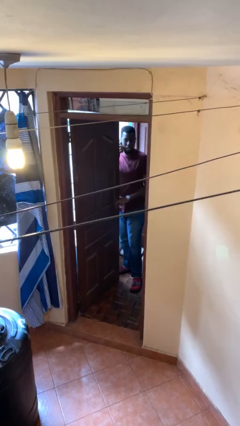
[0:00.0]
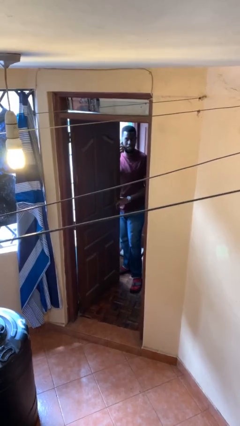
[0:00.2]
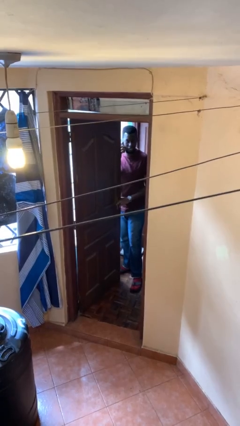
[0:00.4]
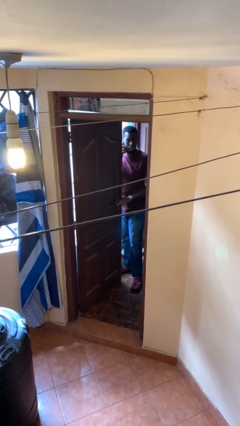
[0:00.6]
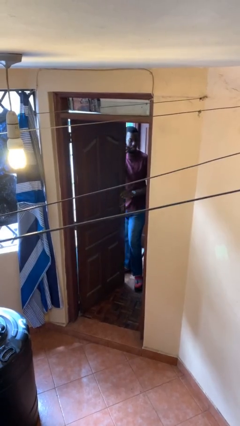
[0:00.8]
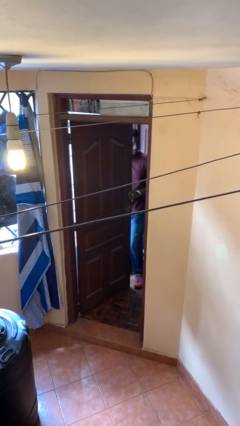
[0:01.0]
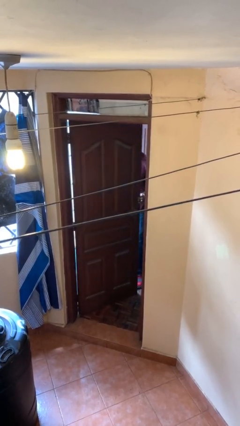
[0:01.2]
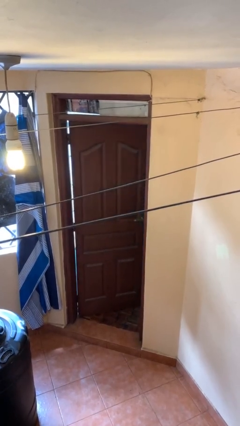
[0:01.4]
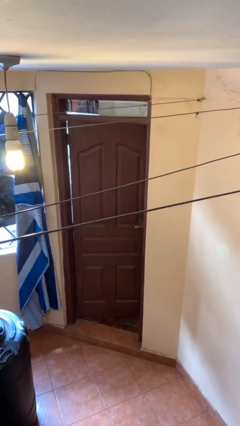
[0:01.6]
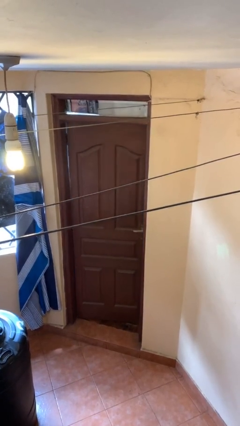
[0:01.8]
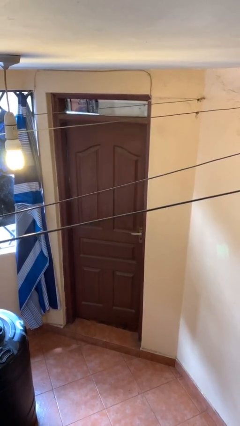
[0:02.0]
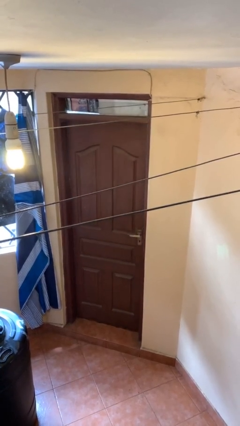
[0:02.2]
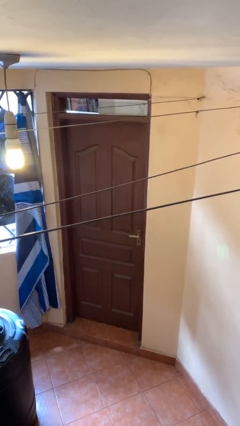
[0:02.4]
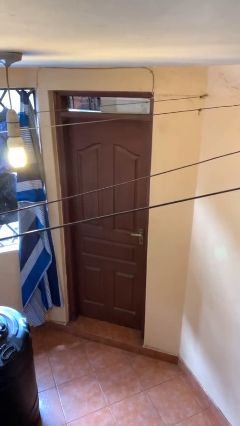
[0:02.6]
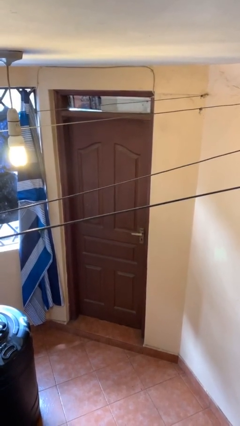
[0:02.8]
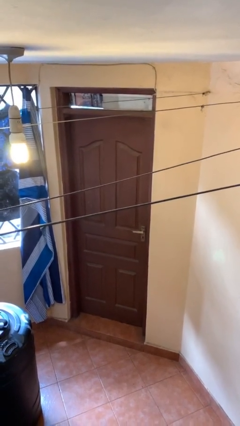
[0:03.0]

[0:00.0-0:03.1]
person closes facility door

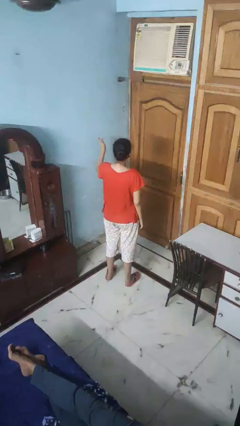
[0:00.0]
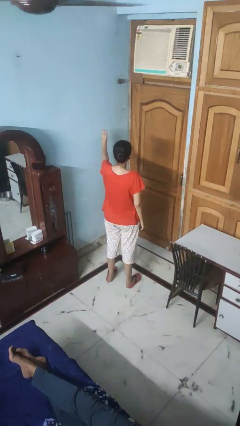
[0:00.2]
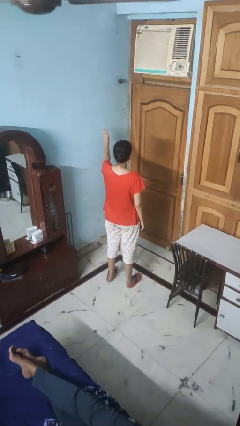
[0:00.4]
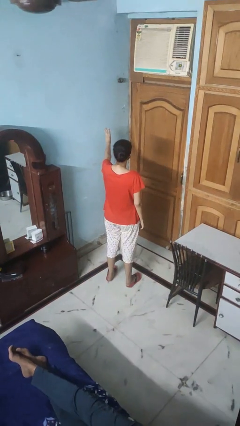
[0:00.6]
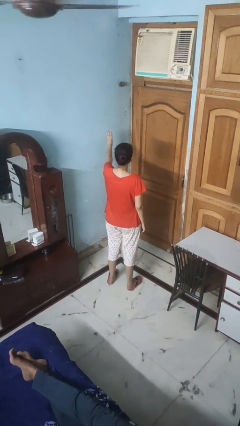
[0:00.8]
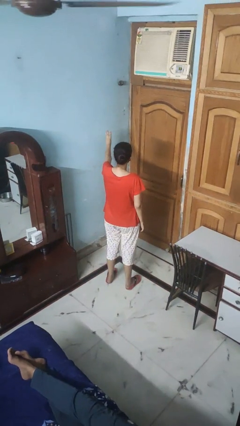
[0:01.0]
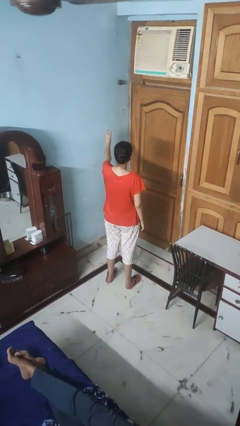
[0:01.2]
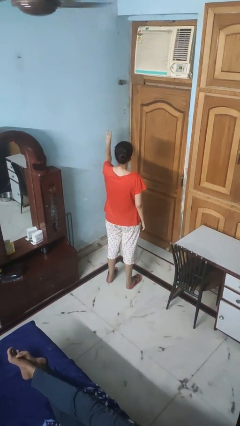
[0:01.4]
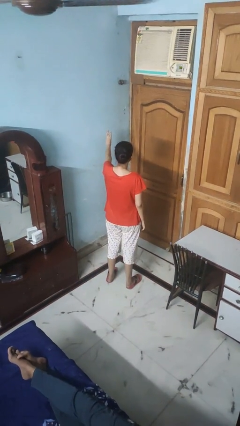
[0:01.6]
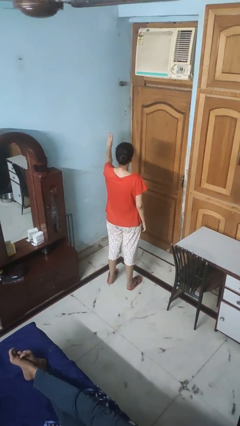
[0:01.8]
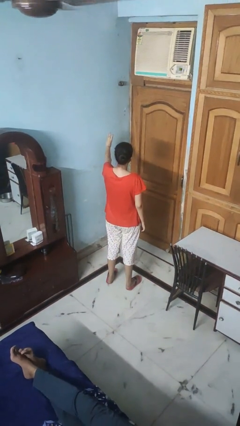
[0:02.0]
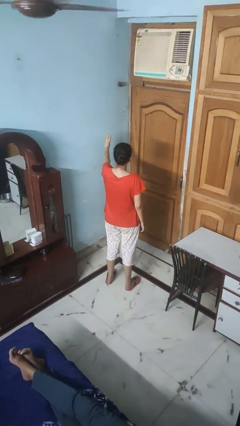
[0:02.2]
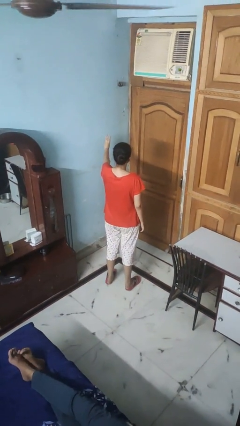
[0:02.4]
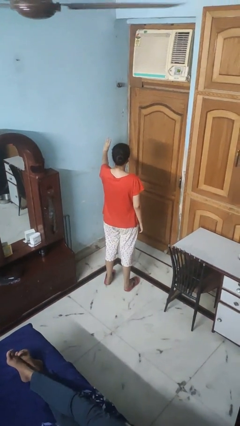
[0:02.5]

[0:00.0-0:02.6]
person gestures number three

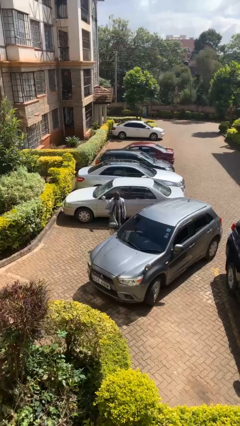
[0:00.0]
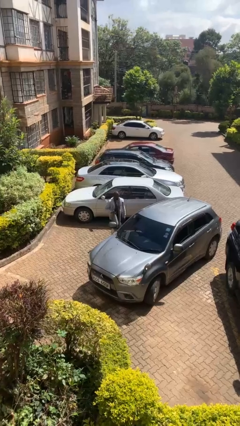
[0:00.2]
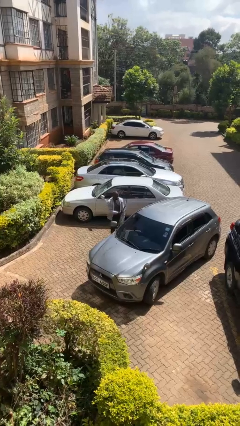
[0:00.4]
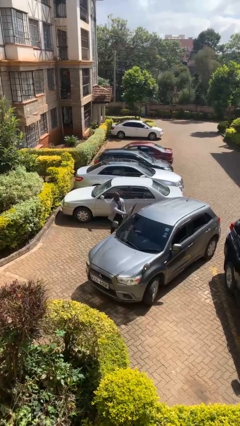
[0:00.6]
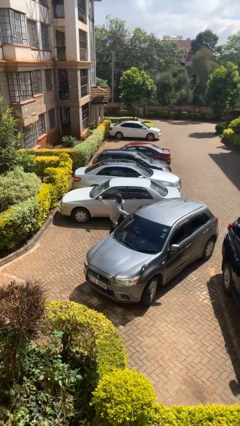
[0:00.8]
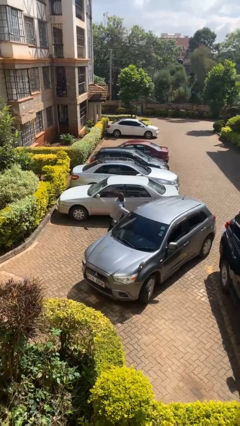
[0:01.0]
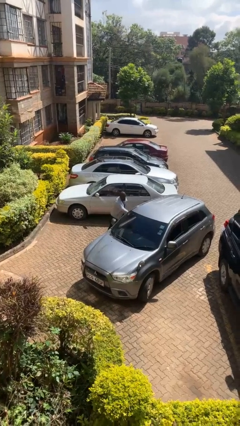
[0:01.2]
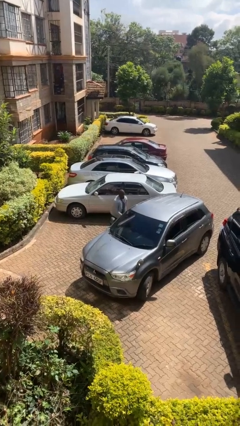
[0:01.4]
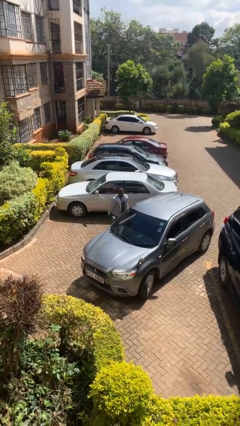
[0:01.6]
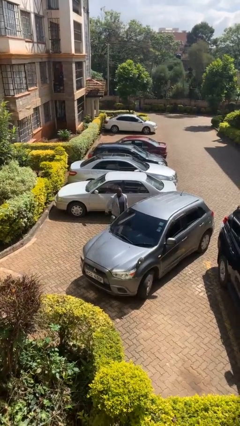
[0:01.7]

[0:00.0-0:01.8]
person closes car door

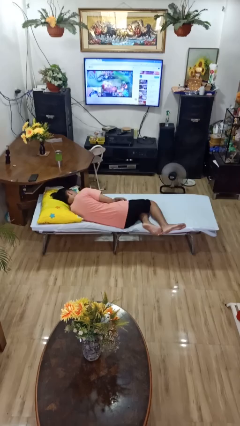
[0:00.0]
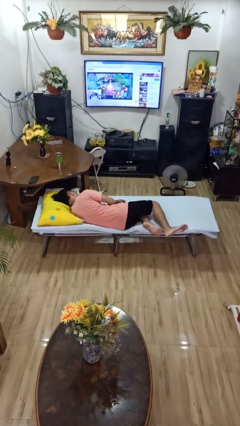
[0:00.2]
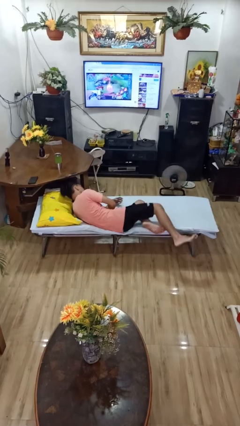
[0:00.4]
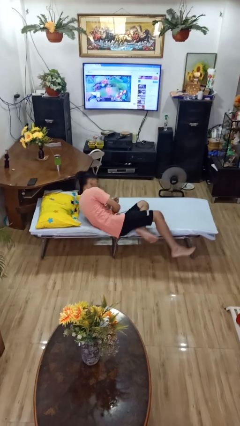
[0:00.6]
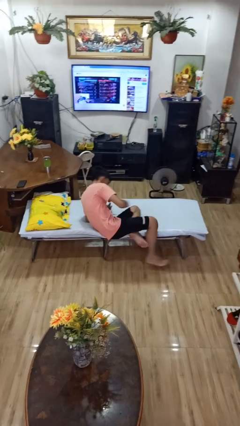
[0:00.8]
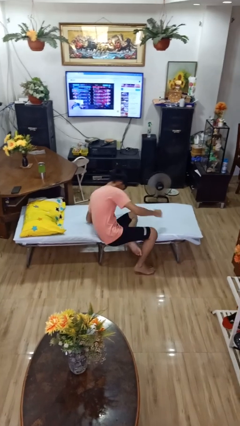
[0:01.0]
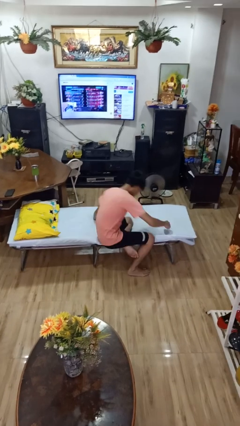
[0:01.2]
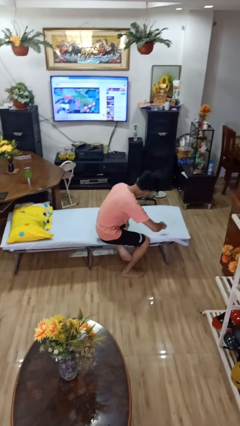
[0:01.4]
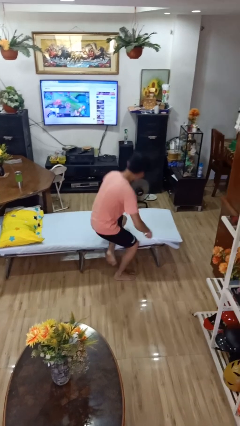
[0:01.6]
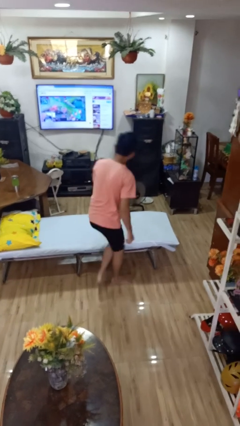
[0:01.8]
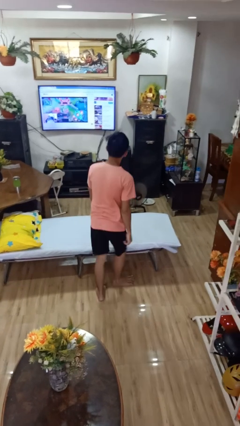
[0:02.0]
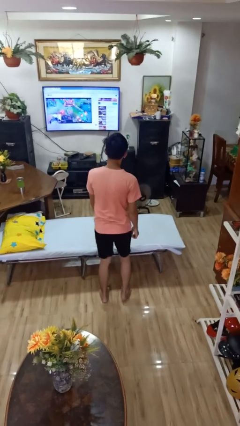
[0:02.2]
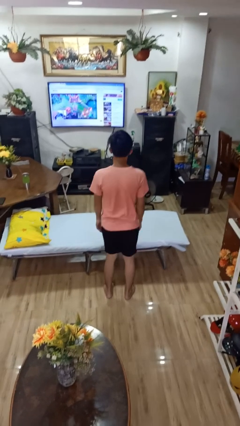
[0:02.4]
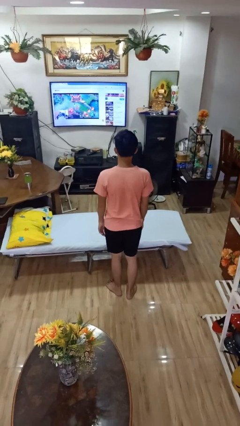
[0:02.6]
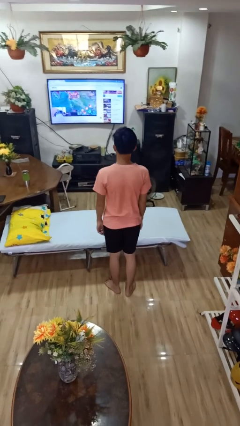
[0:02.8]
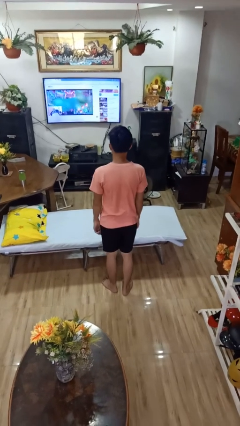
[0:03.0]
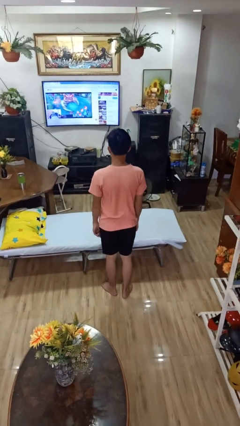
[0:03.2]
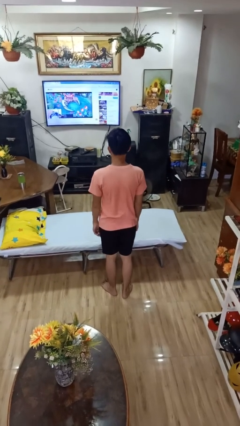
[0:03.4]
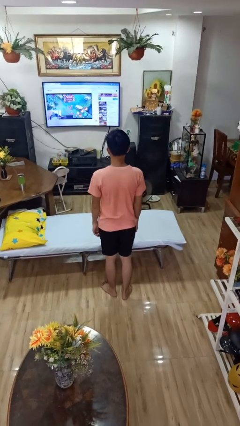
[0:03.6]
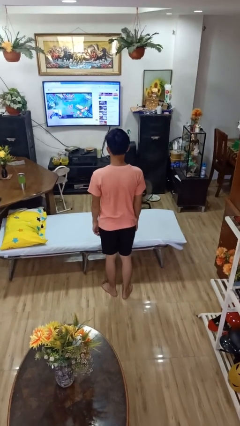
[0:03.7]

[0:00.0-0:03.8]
person stands up

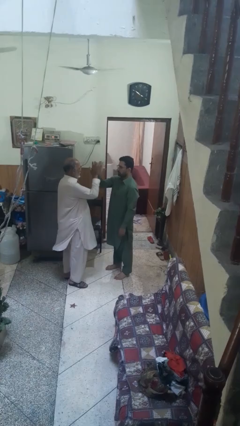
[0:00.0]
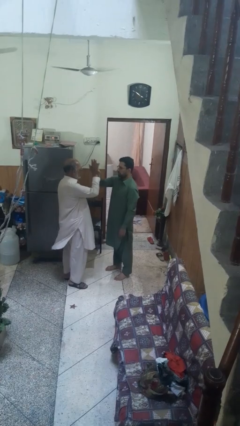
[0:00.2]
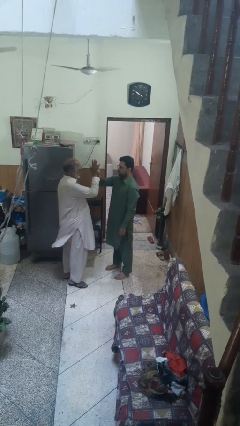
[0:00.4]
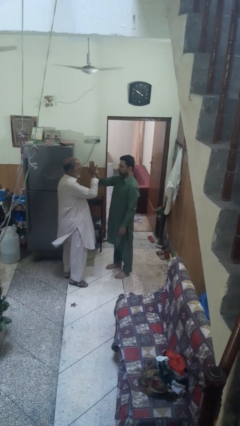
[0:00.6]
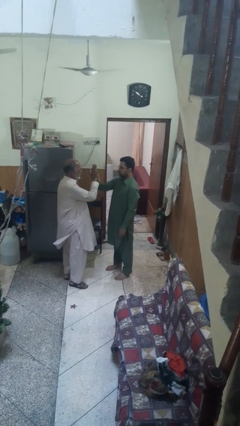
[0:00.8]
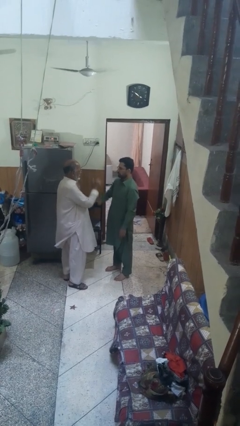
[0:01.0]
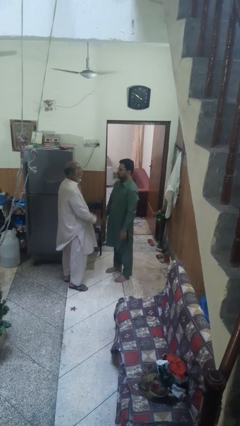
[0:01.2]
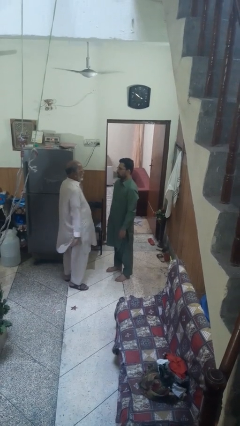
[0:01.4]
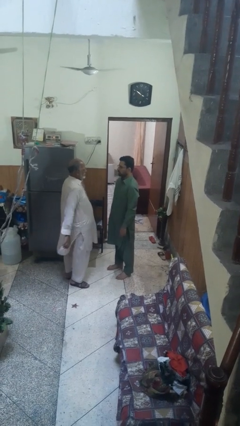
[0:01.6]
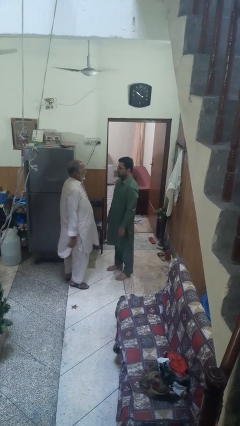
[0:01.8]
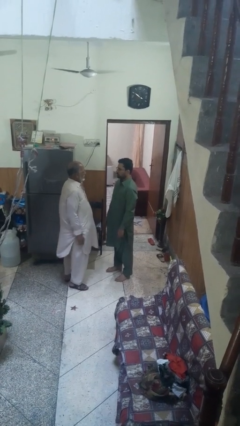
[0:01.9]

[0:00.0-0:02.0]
person highfives hand

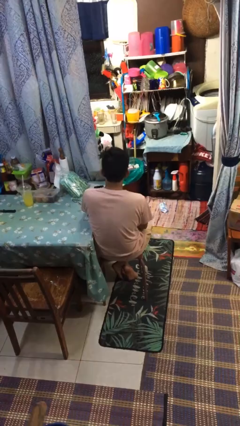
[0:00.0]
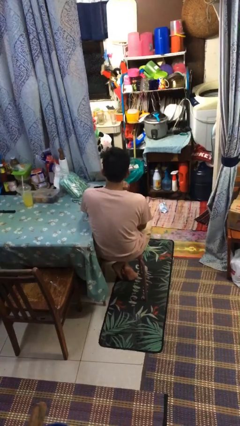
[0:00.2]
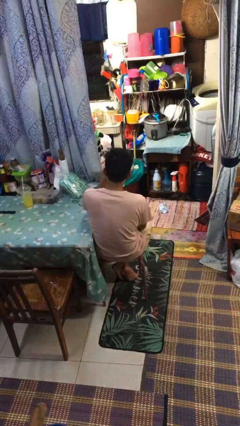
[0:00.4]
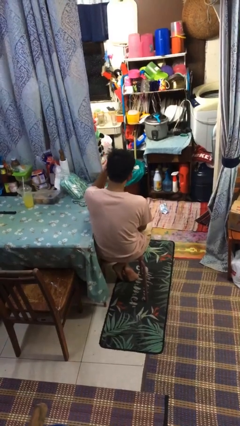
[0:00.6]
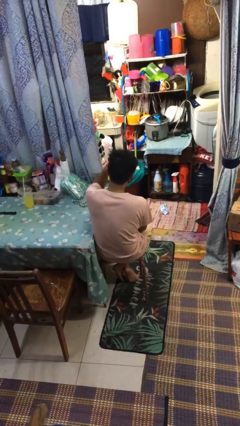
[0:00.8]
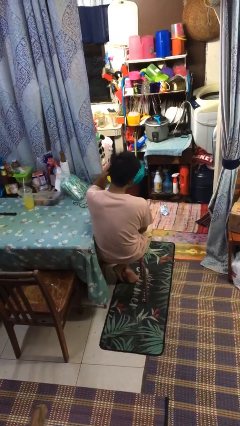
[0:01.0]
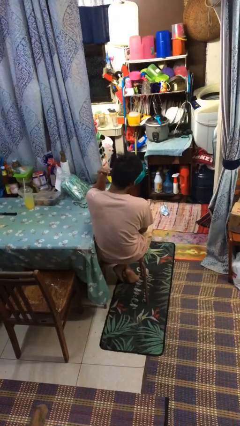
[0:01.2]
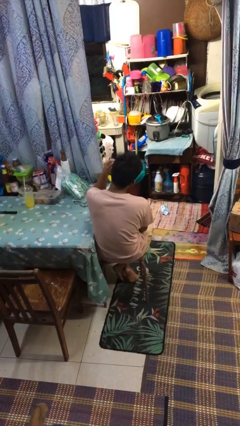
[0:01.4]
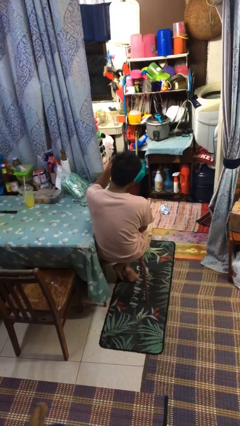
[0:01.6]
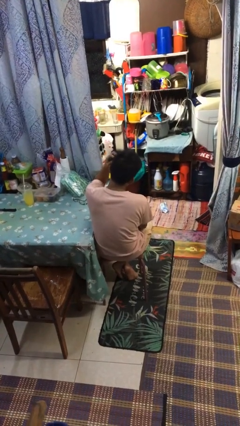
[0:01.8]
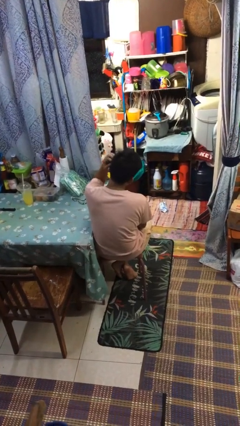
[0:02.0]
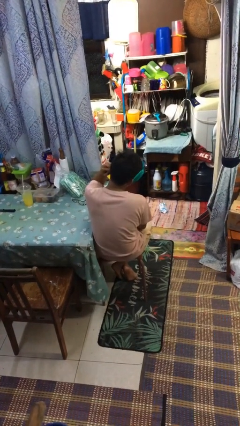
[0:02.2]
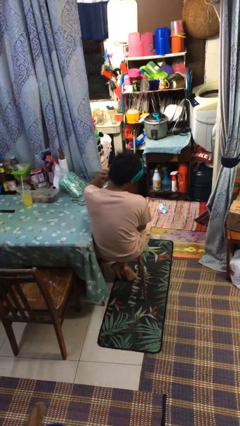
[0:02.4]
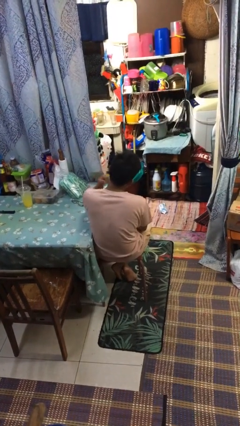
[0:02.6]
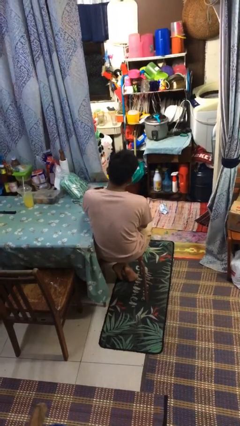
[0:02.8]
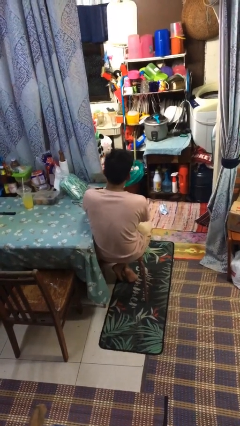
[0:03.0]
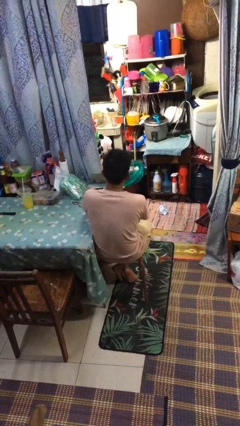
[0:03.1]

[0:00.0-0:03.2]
person strokes hair

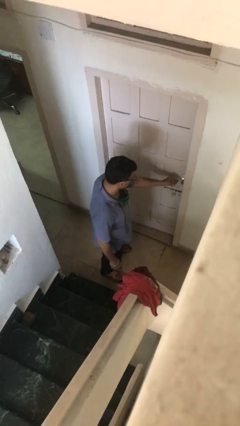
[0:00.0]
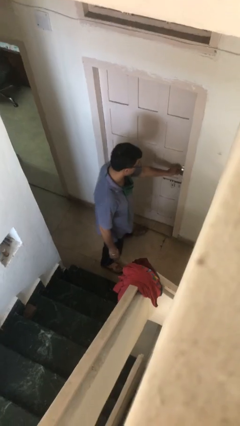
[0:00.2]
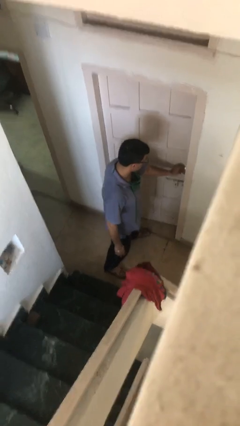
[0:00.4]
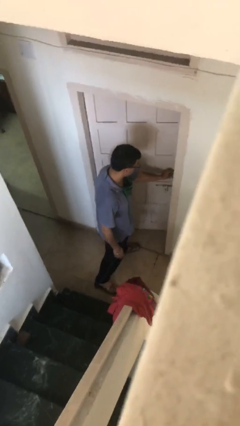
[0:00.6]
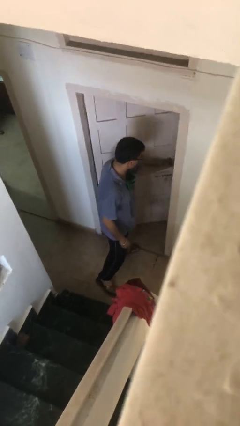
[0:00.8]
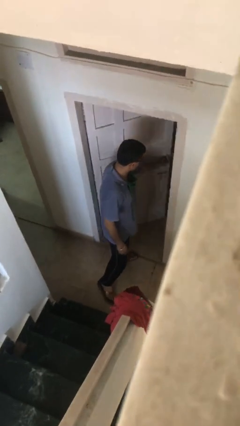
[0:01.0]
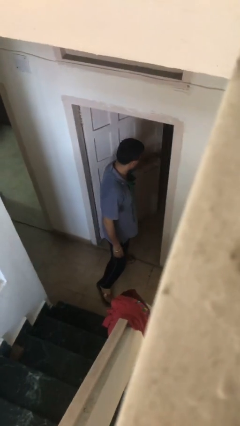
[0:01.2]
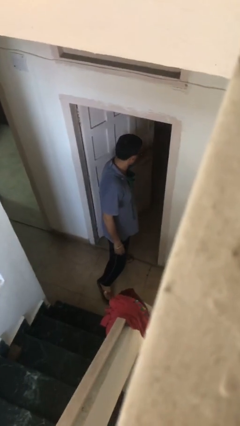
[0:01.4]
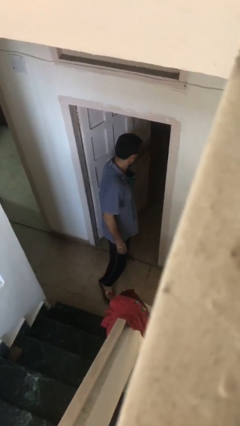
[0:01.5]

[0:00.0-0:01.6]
person opens facility door
